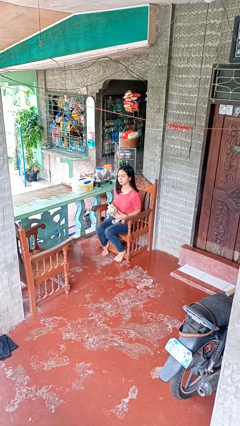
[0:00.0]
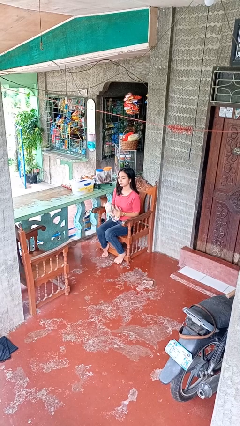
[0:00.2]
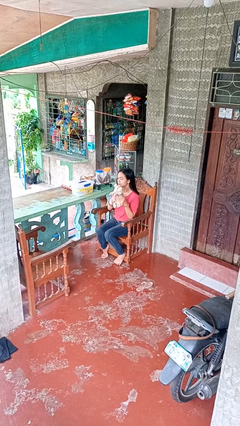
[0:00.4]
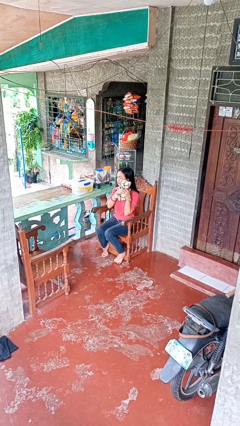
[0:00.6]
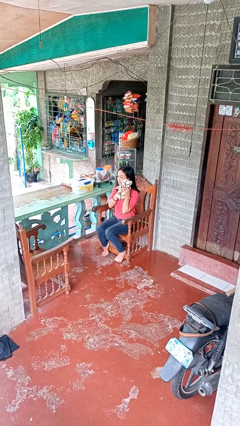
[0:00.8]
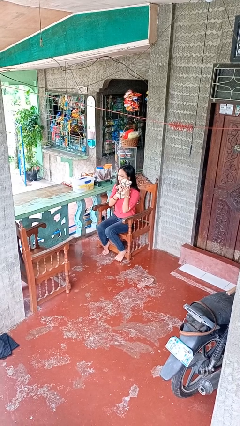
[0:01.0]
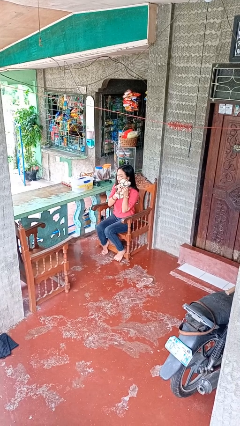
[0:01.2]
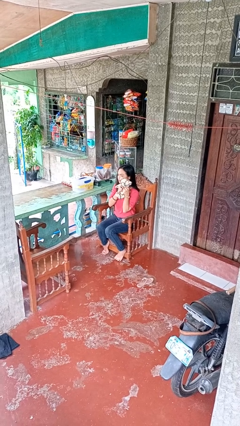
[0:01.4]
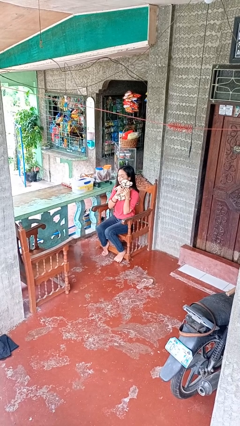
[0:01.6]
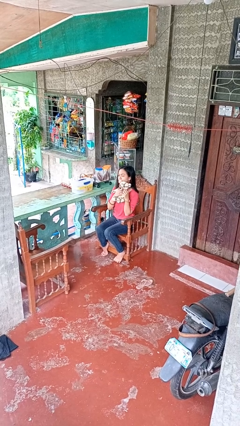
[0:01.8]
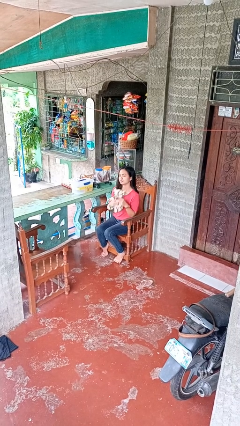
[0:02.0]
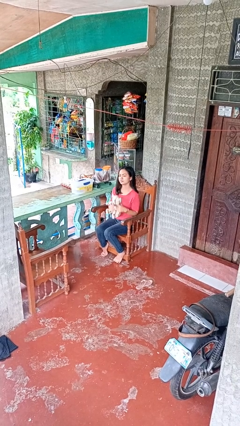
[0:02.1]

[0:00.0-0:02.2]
person hugs stuffed animal

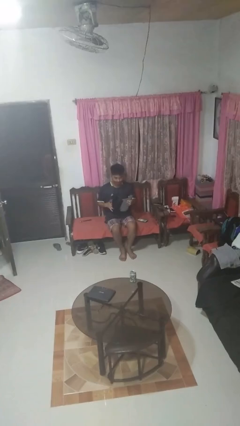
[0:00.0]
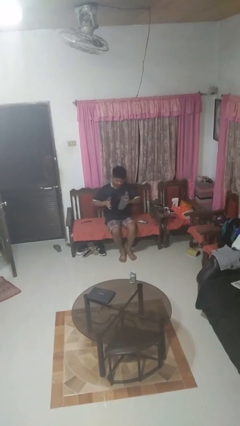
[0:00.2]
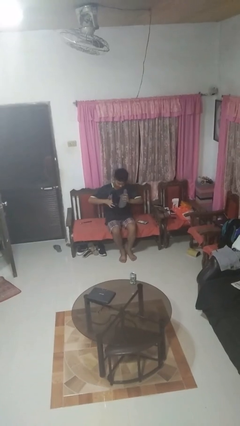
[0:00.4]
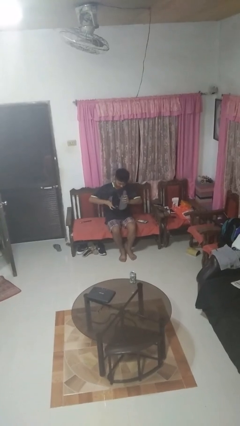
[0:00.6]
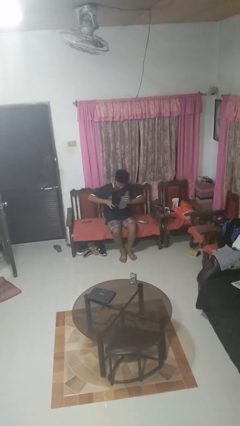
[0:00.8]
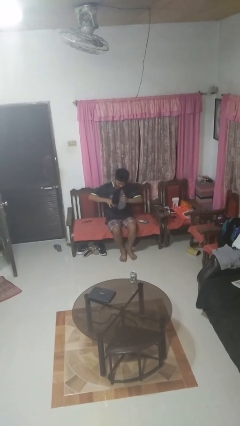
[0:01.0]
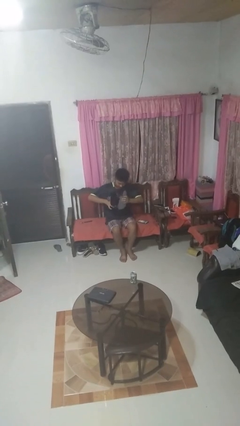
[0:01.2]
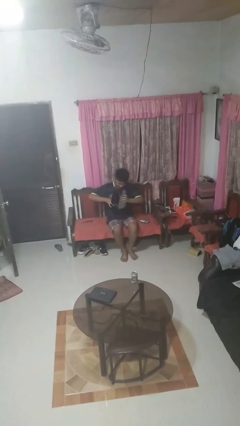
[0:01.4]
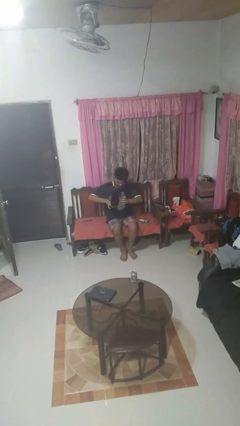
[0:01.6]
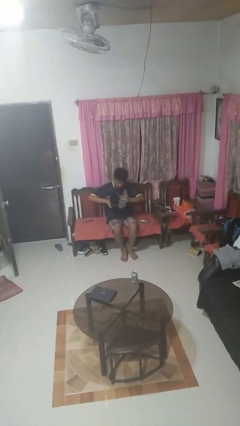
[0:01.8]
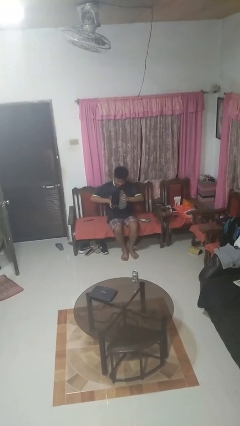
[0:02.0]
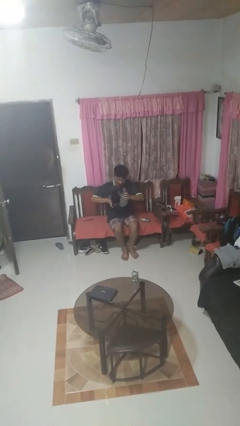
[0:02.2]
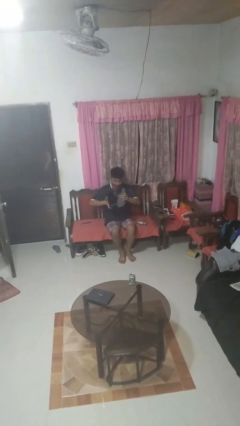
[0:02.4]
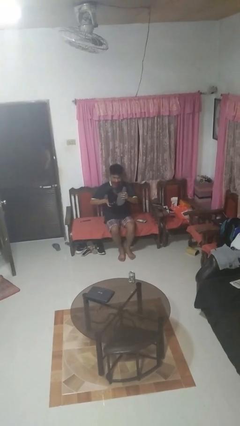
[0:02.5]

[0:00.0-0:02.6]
person squeezes object

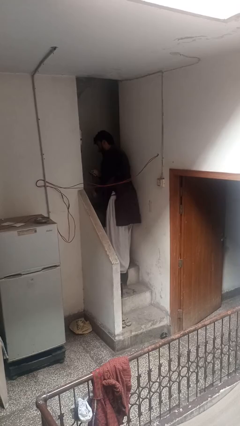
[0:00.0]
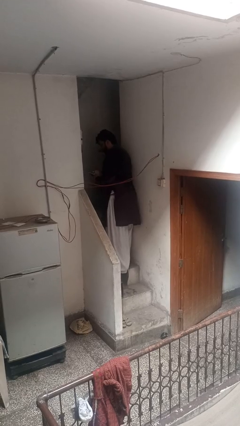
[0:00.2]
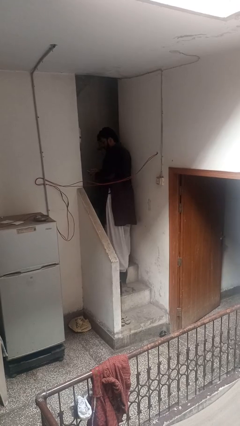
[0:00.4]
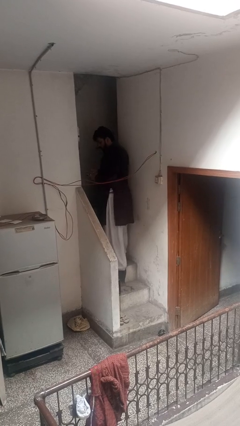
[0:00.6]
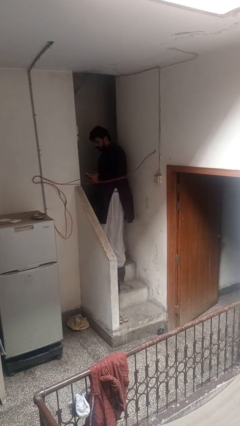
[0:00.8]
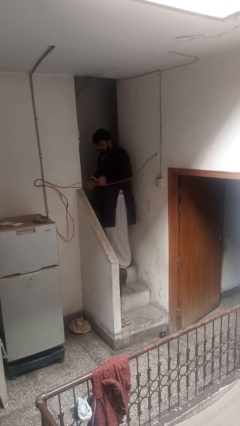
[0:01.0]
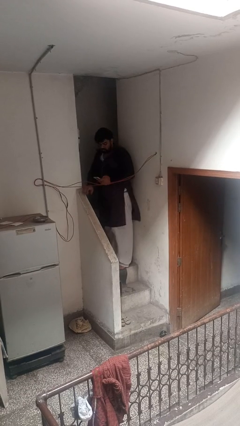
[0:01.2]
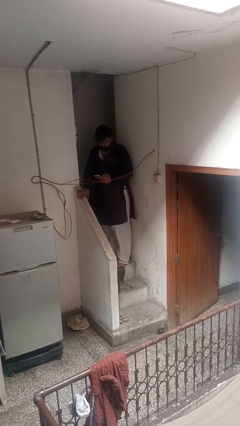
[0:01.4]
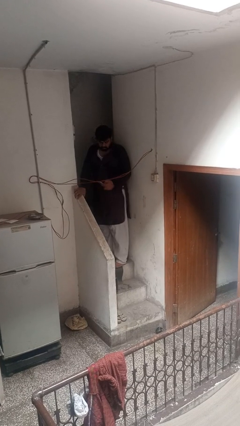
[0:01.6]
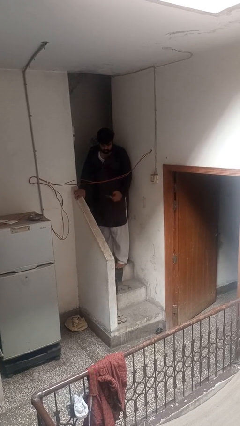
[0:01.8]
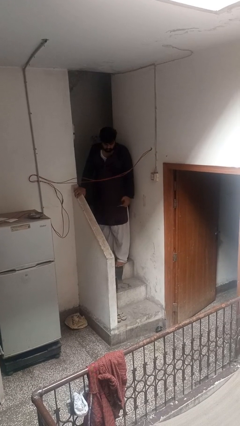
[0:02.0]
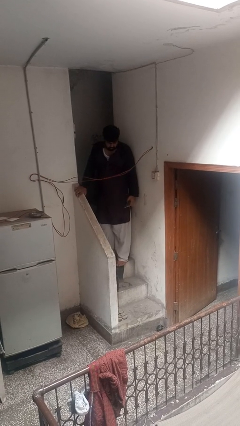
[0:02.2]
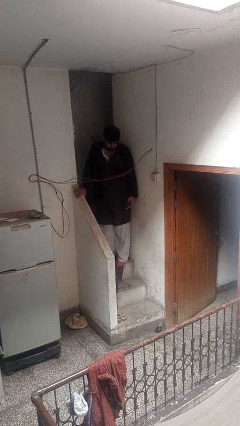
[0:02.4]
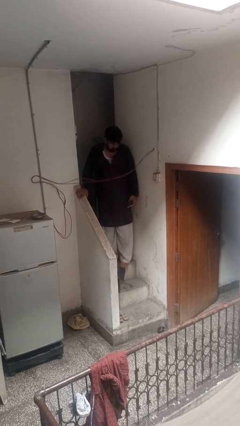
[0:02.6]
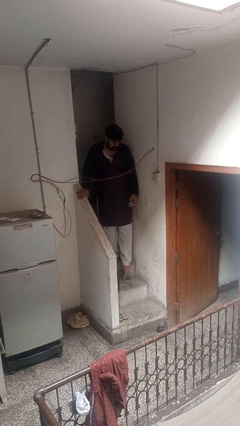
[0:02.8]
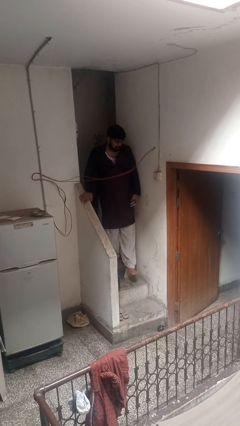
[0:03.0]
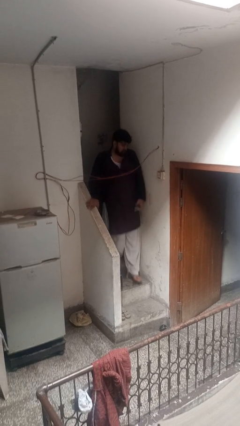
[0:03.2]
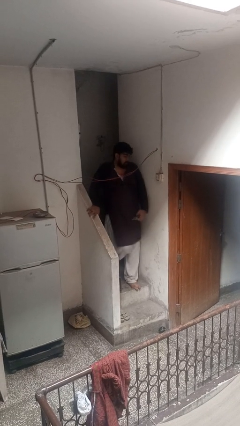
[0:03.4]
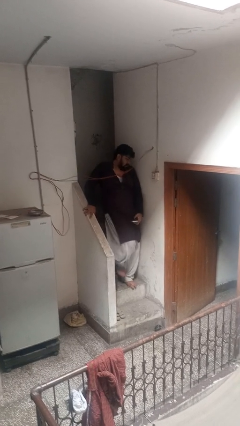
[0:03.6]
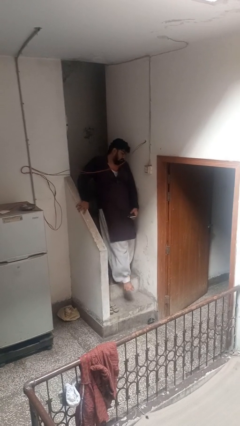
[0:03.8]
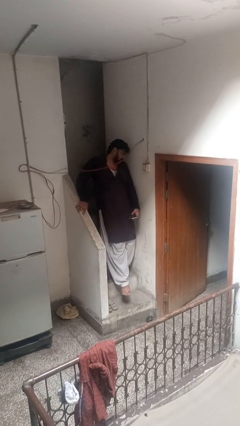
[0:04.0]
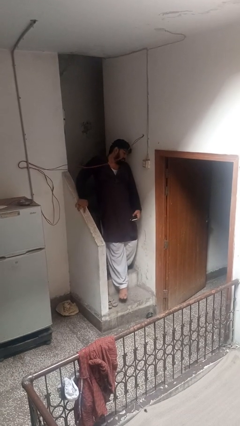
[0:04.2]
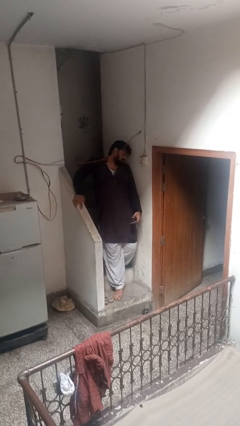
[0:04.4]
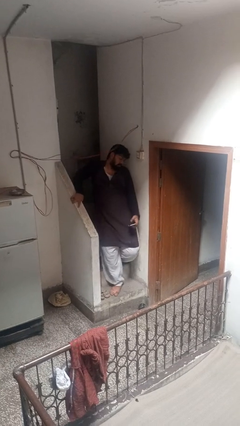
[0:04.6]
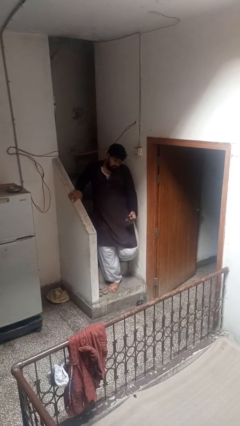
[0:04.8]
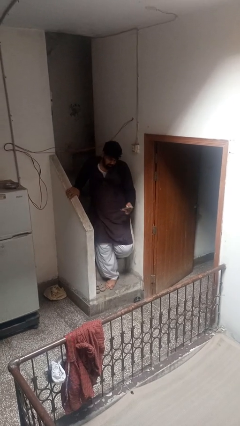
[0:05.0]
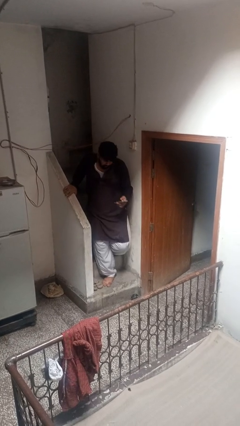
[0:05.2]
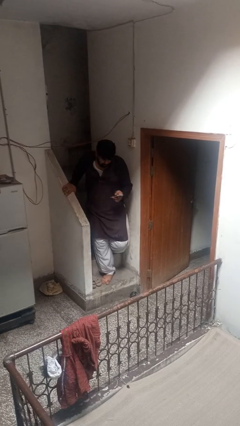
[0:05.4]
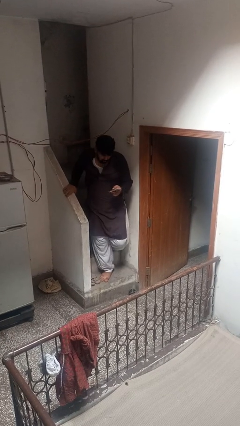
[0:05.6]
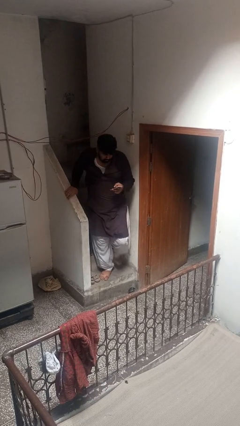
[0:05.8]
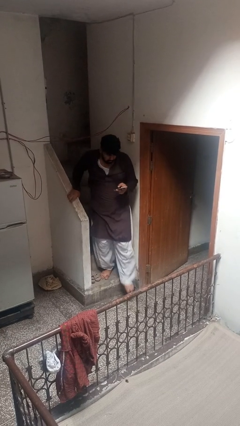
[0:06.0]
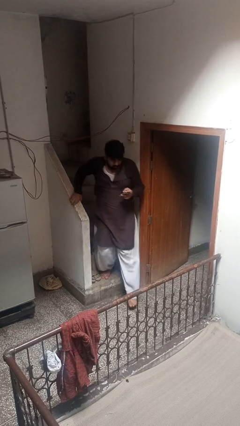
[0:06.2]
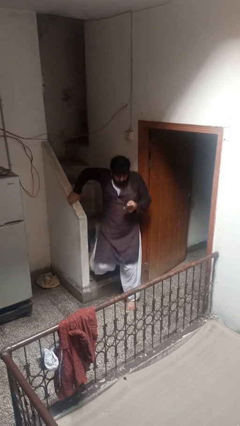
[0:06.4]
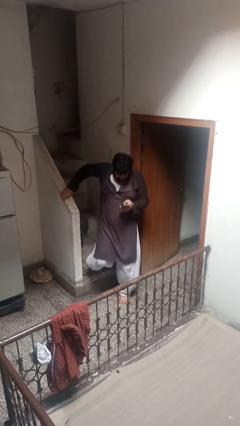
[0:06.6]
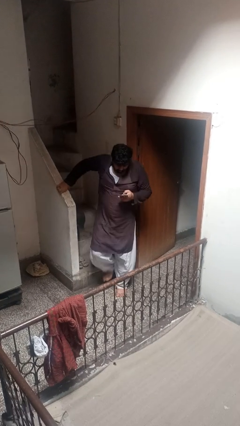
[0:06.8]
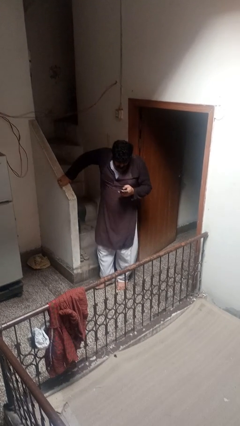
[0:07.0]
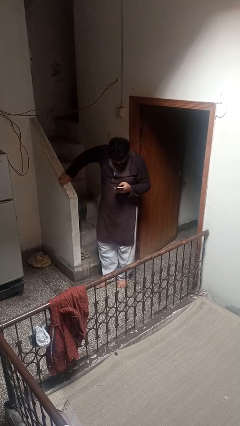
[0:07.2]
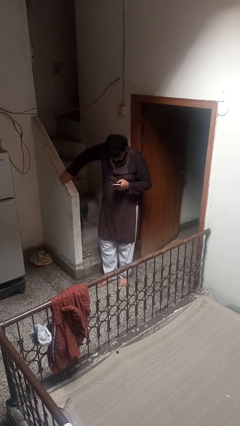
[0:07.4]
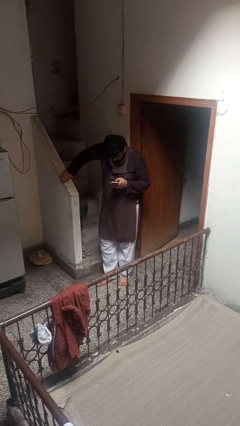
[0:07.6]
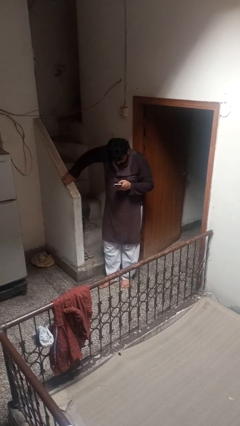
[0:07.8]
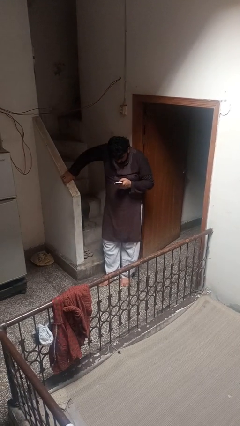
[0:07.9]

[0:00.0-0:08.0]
person climbs down stairs

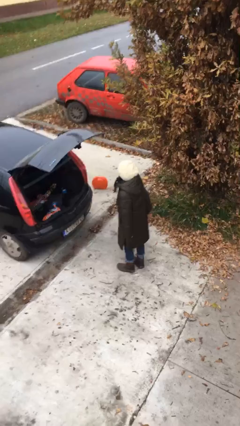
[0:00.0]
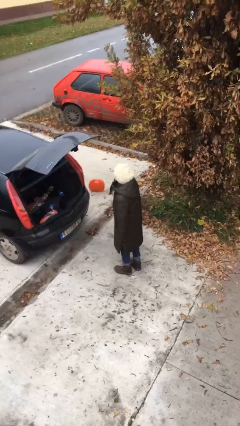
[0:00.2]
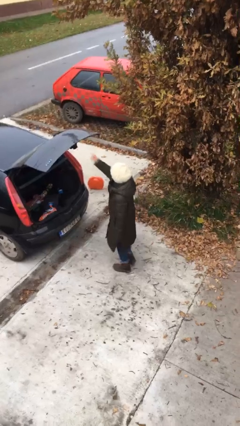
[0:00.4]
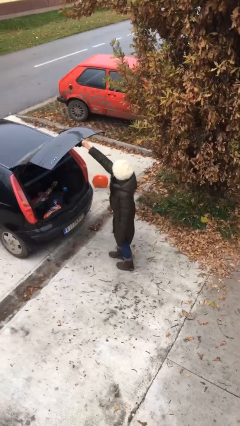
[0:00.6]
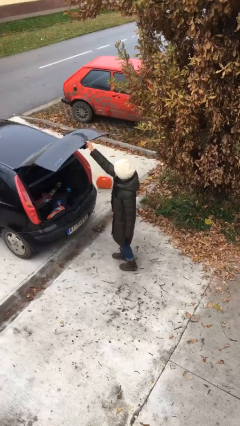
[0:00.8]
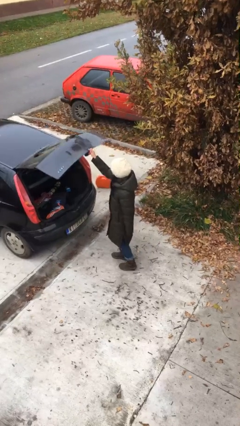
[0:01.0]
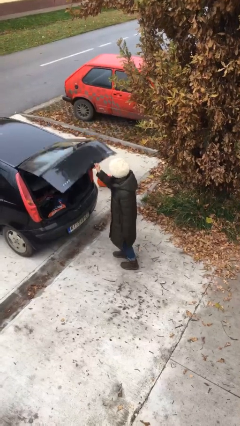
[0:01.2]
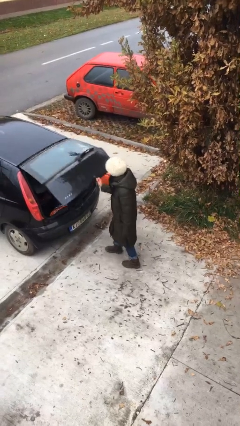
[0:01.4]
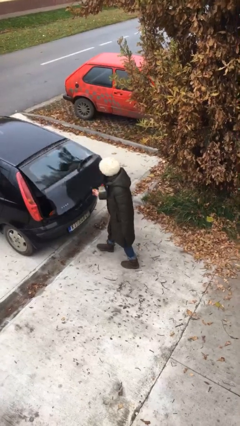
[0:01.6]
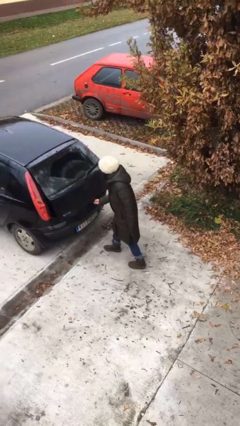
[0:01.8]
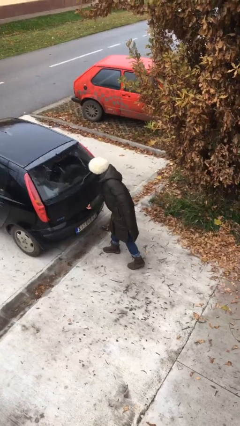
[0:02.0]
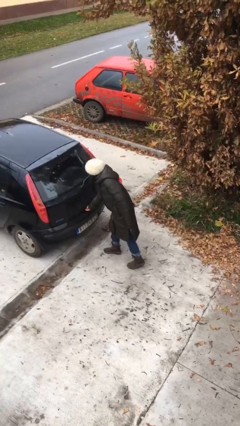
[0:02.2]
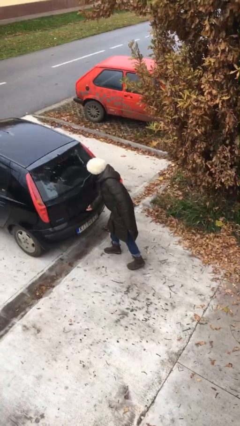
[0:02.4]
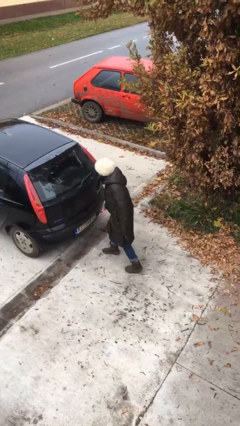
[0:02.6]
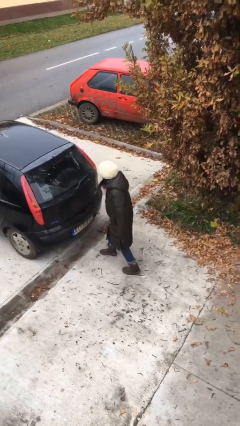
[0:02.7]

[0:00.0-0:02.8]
person closes car trunk

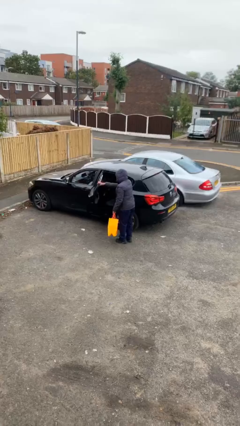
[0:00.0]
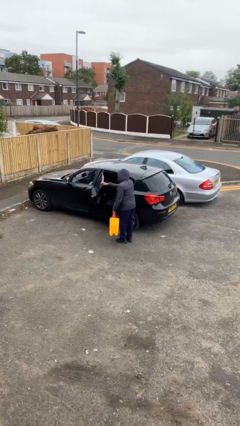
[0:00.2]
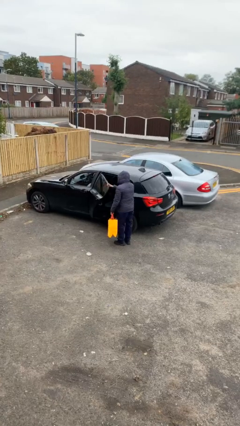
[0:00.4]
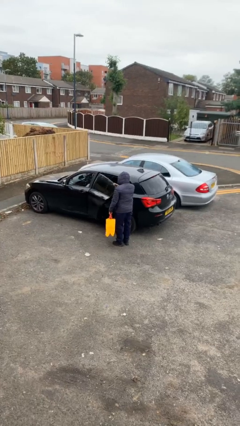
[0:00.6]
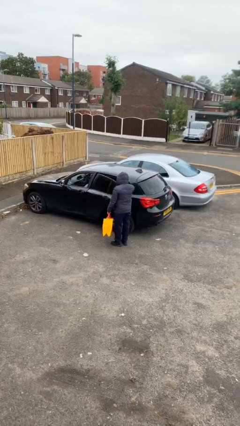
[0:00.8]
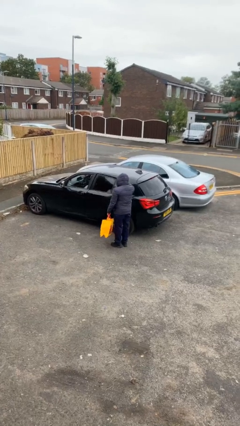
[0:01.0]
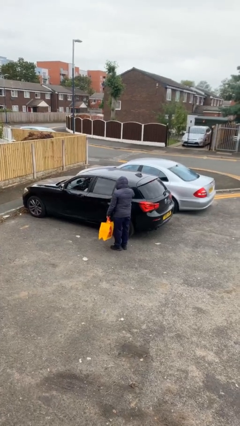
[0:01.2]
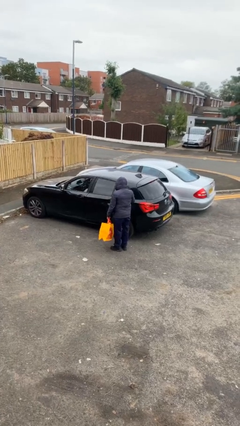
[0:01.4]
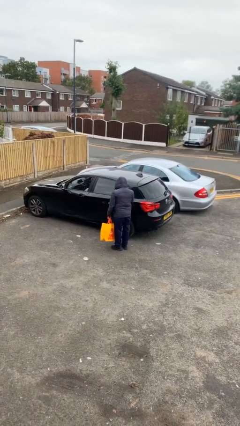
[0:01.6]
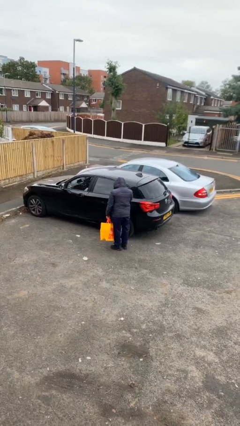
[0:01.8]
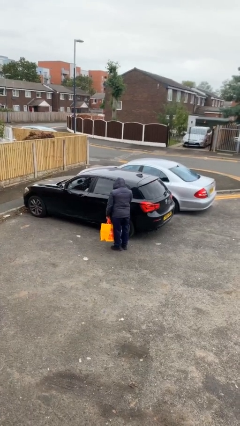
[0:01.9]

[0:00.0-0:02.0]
person closes car door
